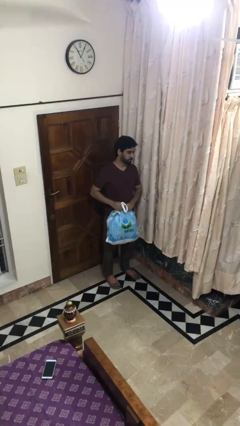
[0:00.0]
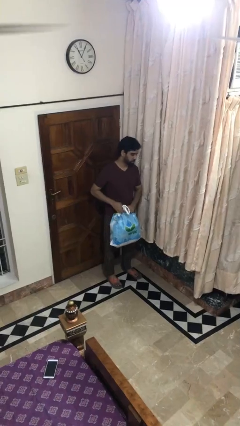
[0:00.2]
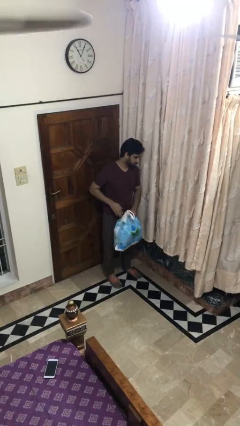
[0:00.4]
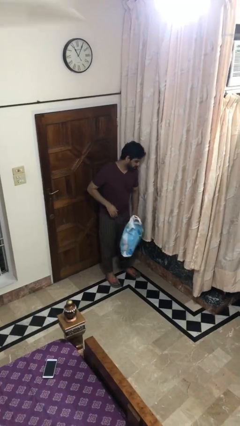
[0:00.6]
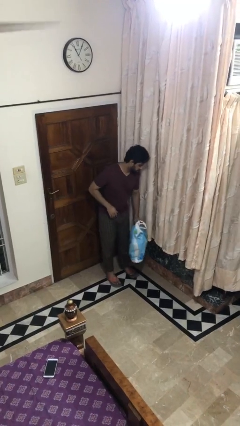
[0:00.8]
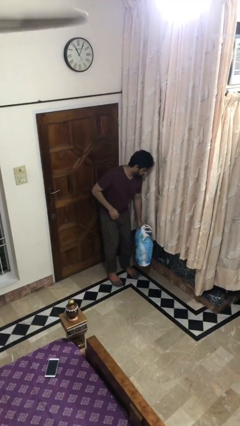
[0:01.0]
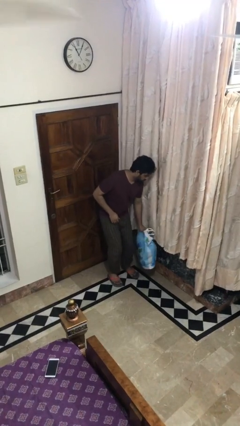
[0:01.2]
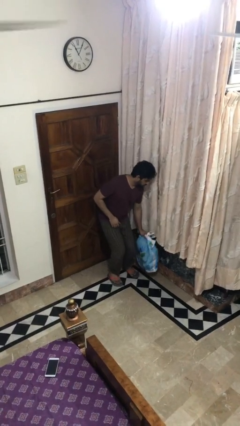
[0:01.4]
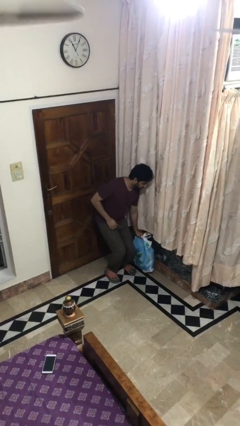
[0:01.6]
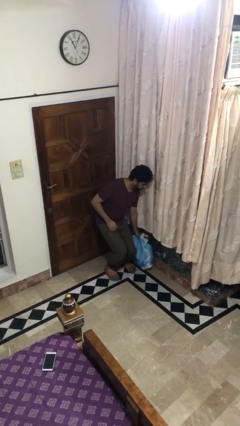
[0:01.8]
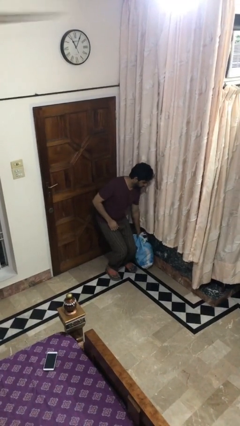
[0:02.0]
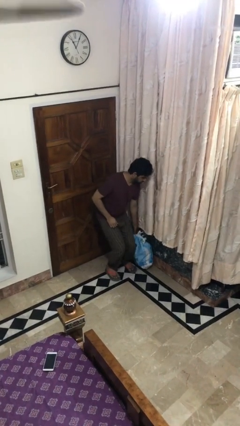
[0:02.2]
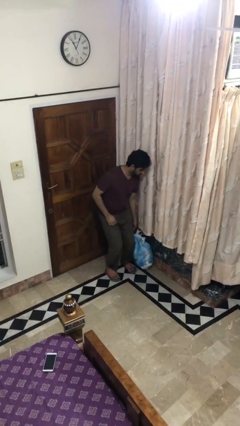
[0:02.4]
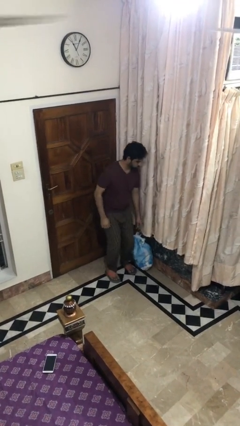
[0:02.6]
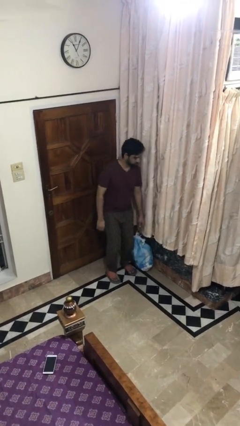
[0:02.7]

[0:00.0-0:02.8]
person puts down object on floor

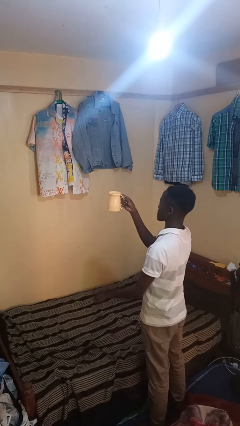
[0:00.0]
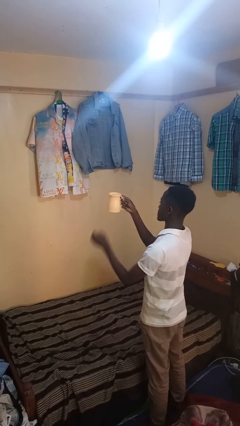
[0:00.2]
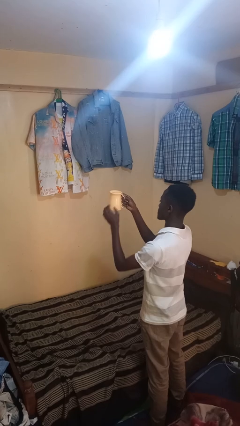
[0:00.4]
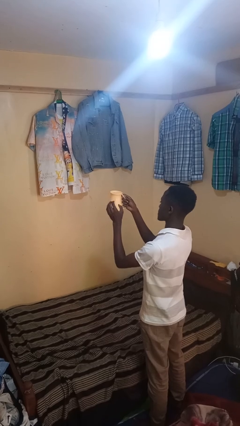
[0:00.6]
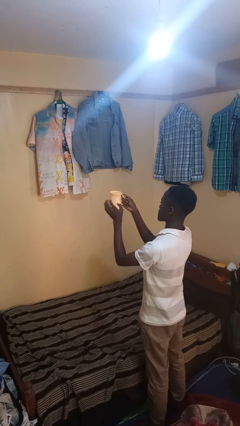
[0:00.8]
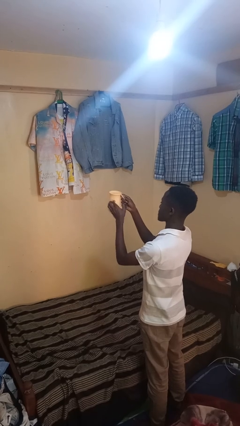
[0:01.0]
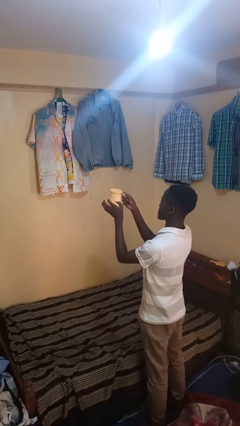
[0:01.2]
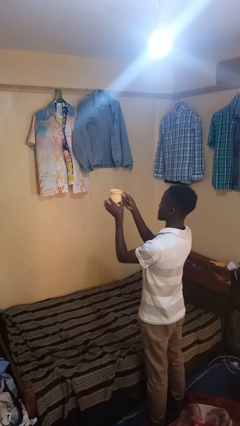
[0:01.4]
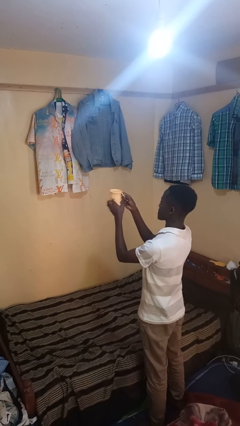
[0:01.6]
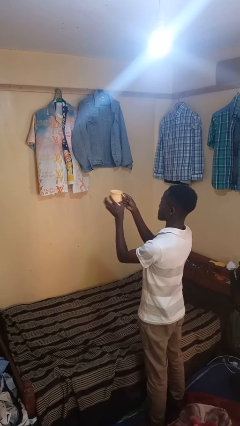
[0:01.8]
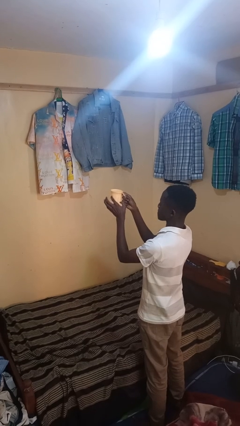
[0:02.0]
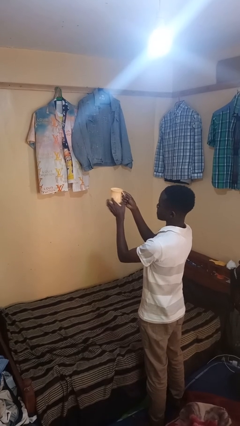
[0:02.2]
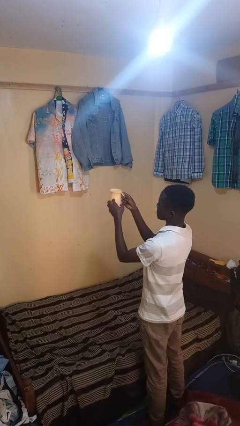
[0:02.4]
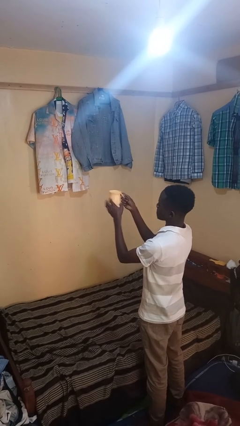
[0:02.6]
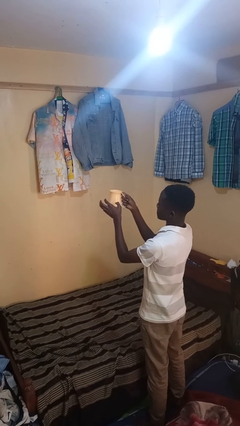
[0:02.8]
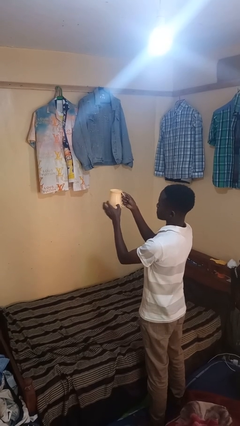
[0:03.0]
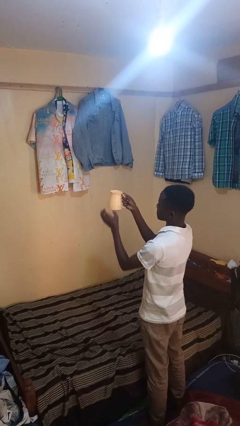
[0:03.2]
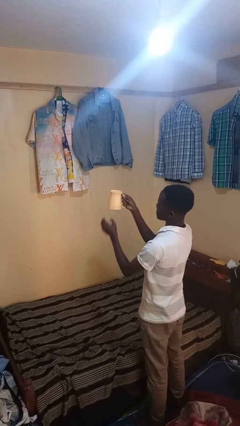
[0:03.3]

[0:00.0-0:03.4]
person taps object with finger

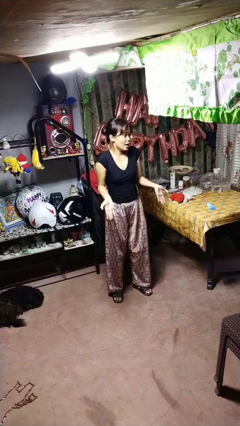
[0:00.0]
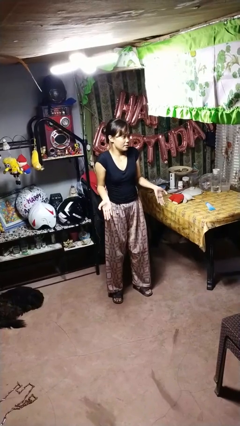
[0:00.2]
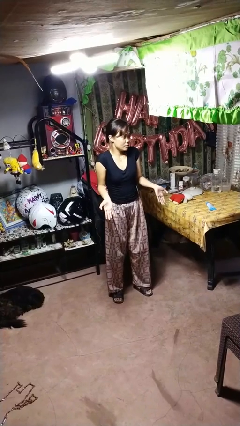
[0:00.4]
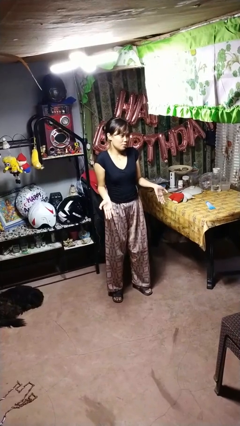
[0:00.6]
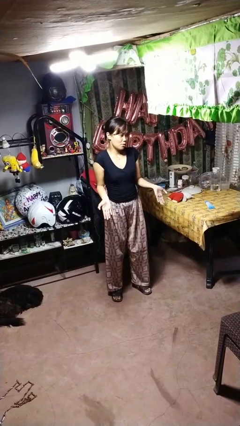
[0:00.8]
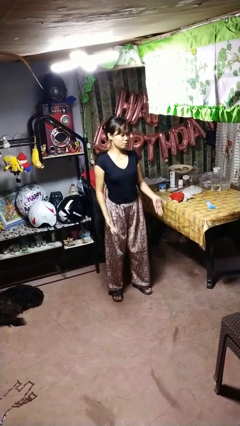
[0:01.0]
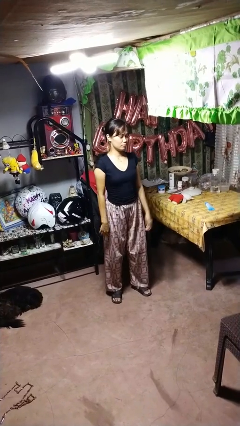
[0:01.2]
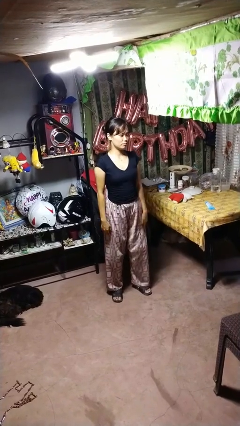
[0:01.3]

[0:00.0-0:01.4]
person shrugs

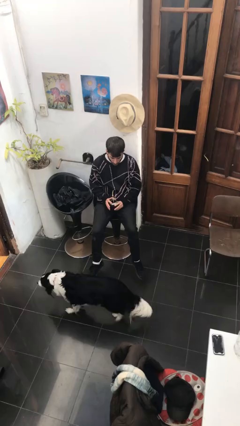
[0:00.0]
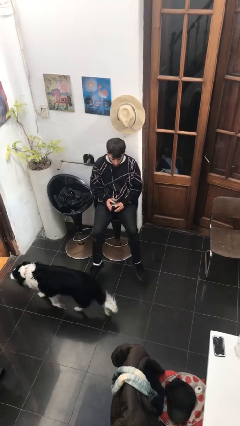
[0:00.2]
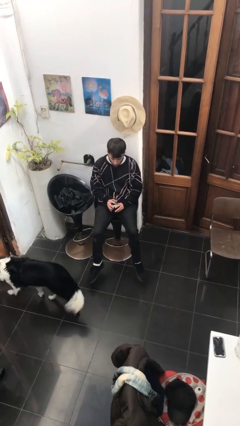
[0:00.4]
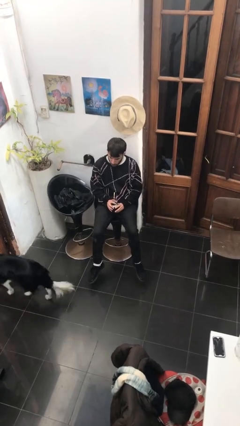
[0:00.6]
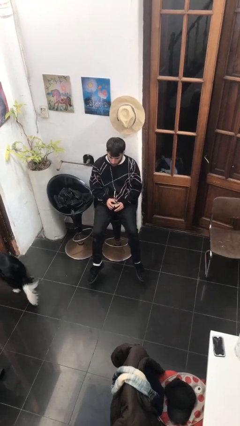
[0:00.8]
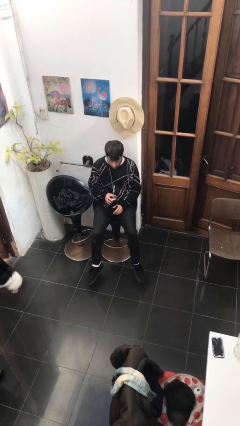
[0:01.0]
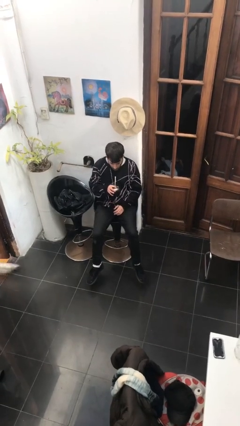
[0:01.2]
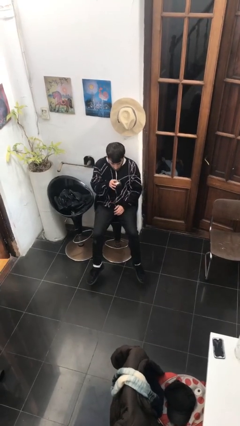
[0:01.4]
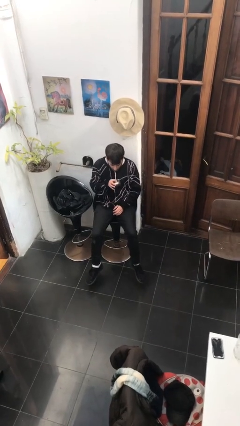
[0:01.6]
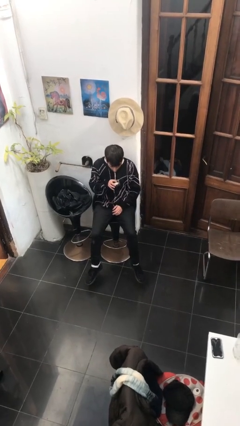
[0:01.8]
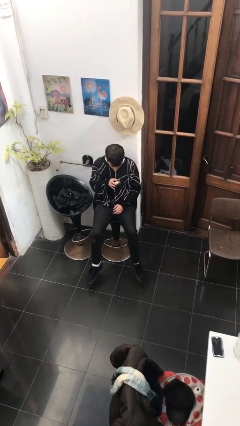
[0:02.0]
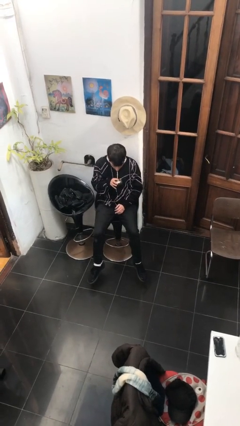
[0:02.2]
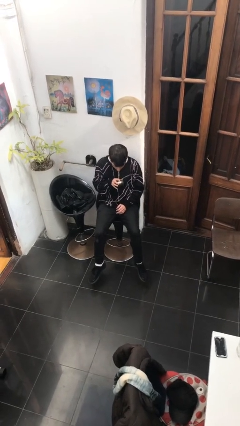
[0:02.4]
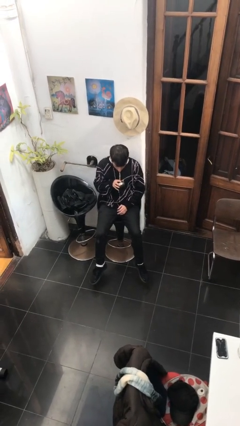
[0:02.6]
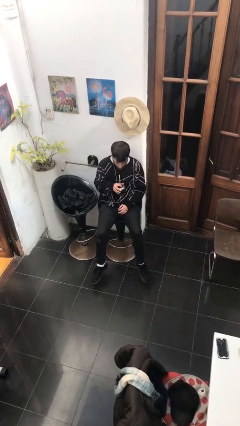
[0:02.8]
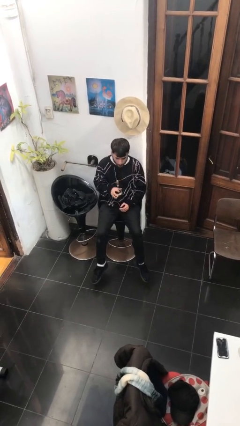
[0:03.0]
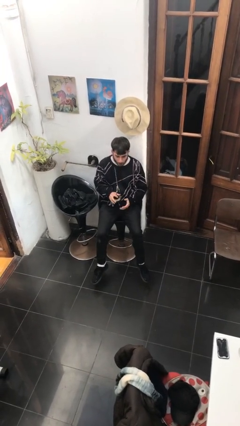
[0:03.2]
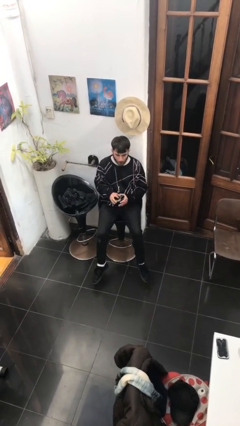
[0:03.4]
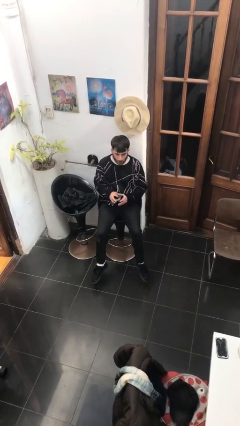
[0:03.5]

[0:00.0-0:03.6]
person drinks from straw

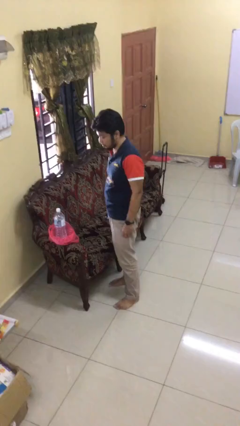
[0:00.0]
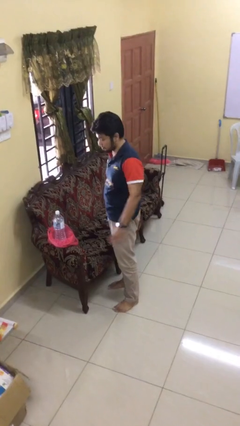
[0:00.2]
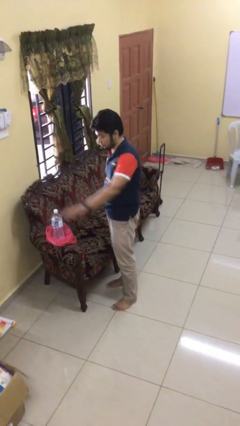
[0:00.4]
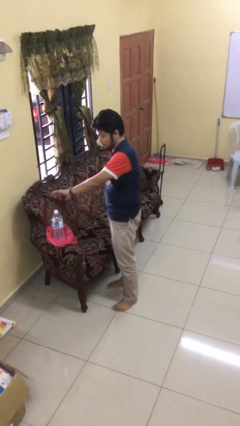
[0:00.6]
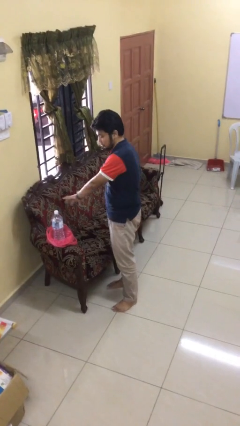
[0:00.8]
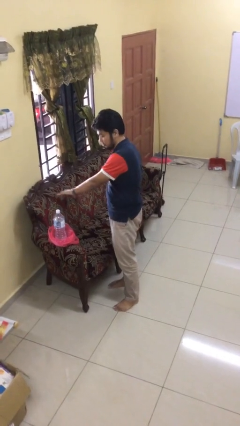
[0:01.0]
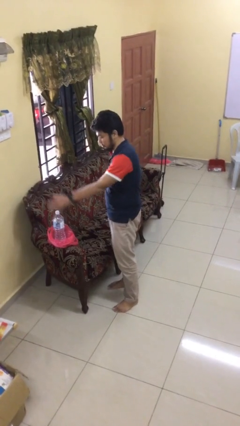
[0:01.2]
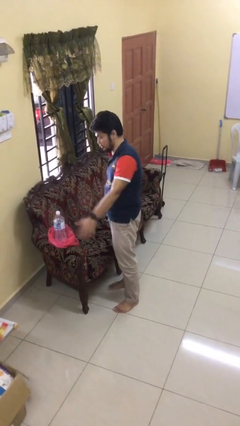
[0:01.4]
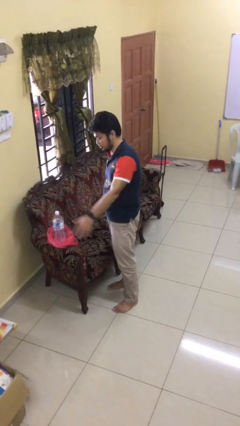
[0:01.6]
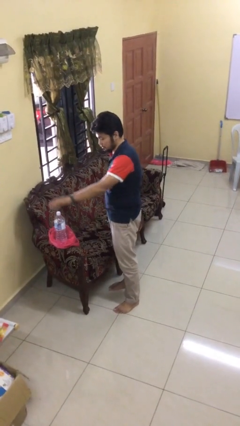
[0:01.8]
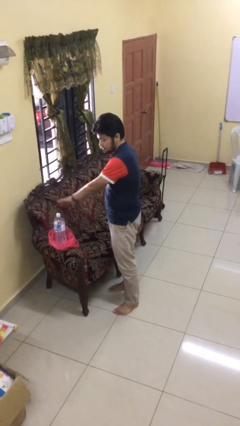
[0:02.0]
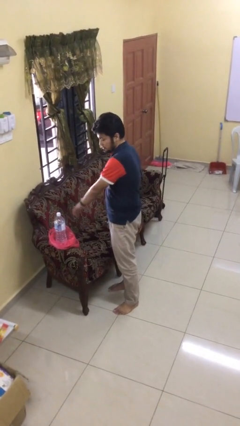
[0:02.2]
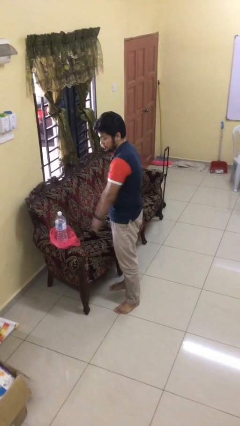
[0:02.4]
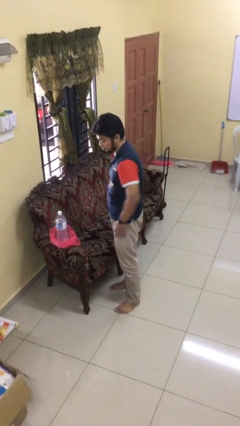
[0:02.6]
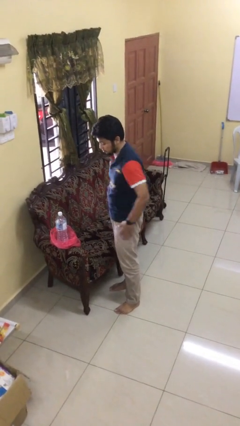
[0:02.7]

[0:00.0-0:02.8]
person waves hand over object

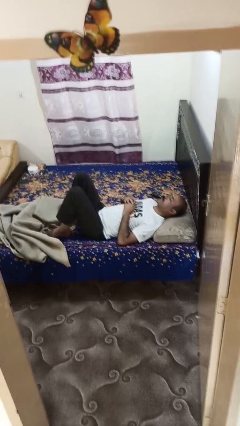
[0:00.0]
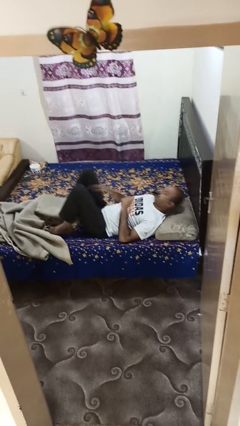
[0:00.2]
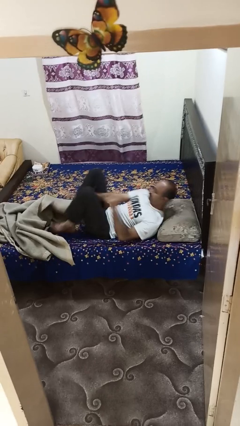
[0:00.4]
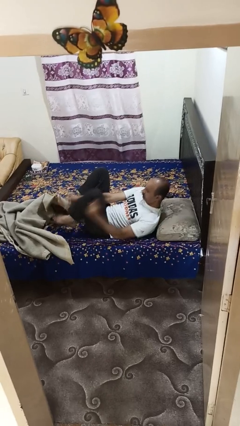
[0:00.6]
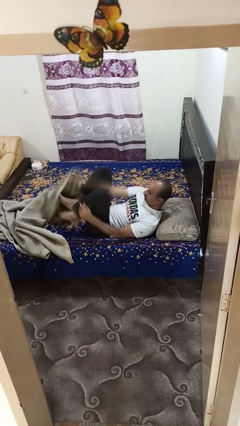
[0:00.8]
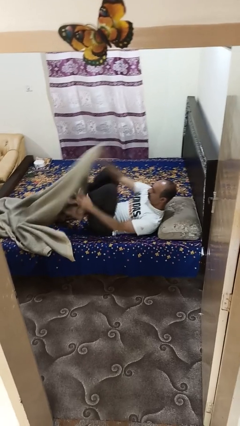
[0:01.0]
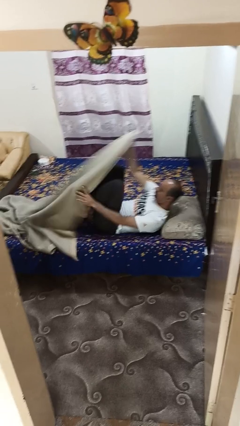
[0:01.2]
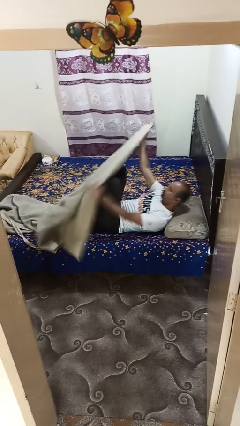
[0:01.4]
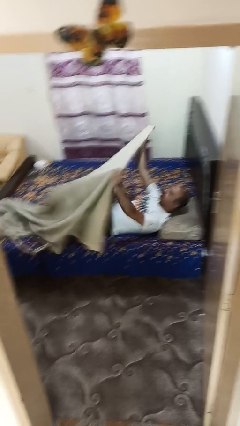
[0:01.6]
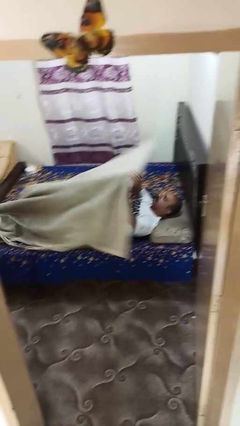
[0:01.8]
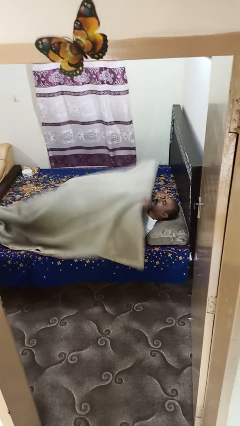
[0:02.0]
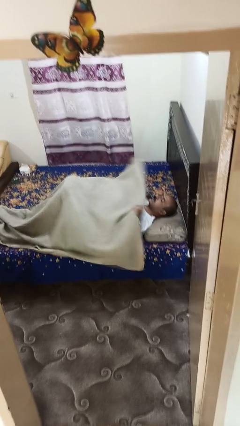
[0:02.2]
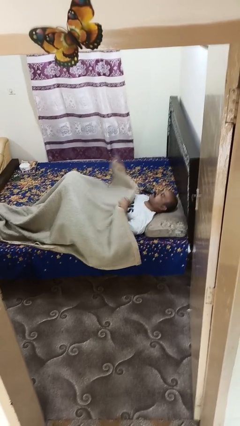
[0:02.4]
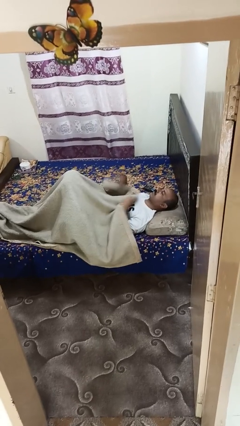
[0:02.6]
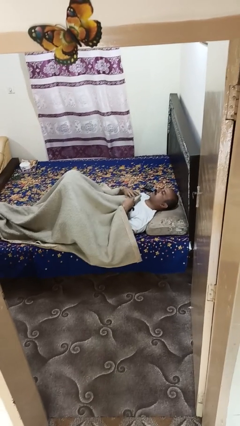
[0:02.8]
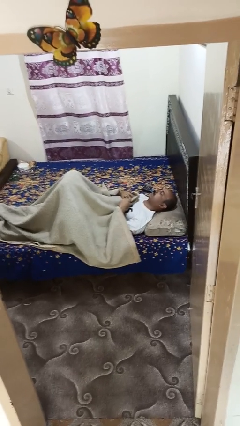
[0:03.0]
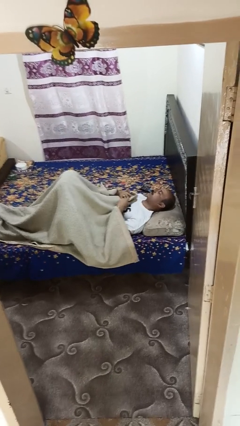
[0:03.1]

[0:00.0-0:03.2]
person covers with bedsheets
